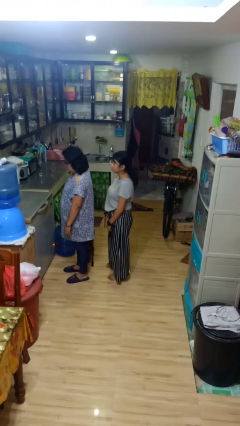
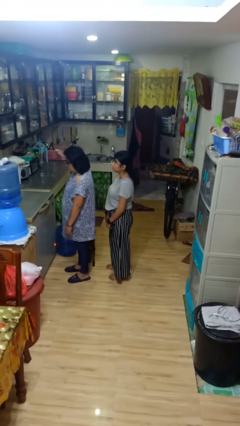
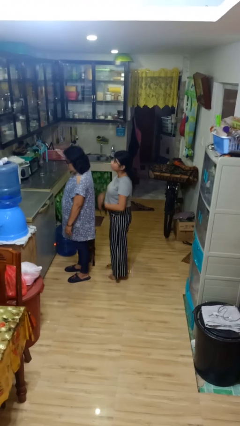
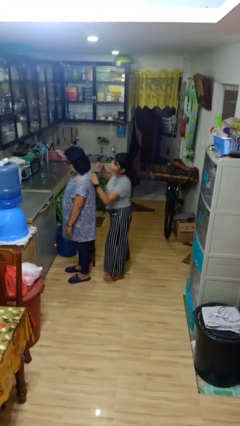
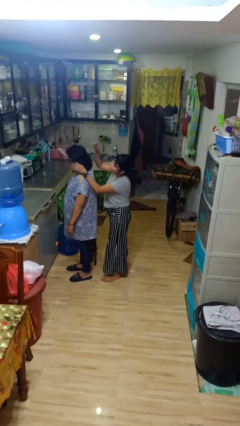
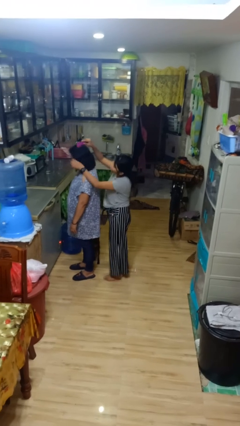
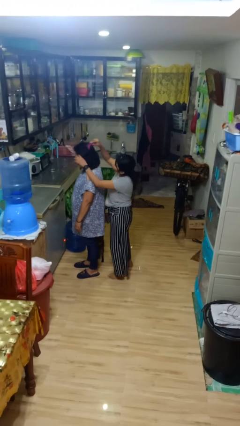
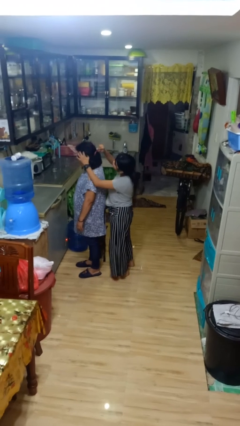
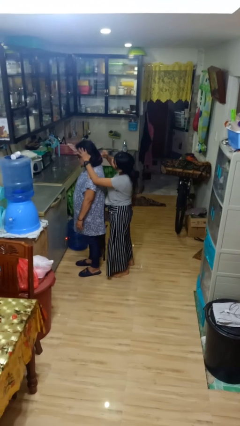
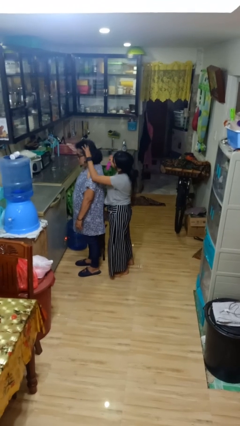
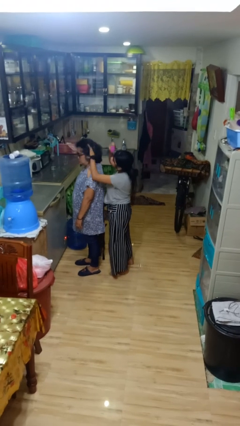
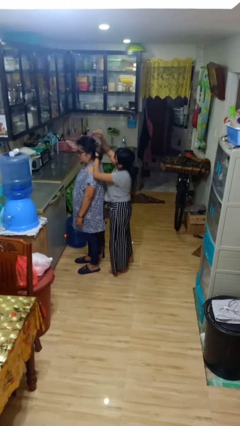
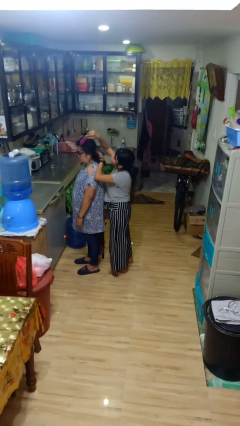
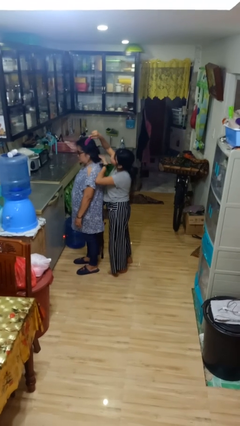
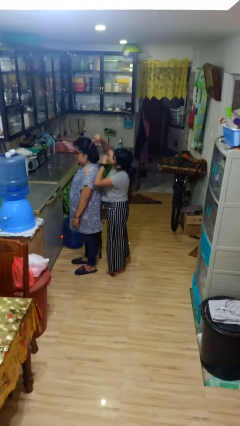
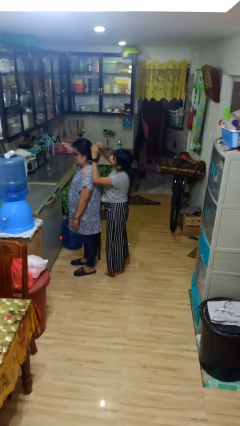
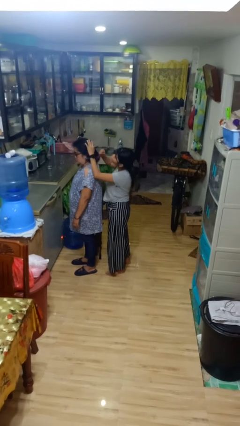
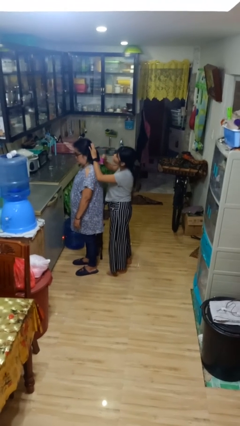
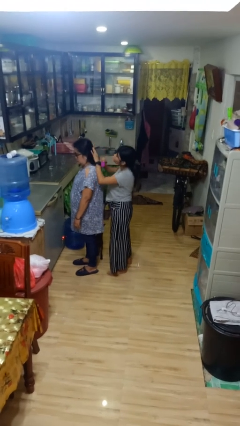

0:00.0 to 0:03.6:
person brushes hair of person

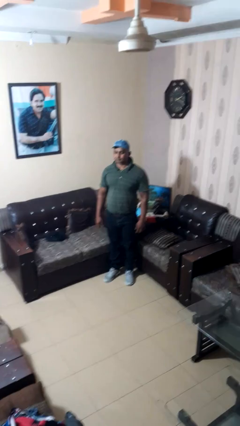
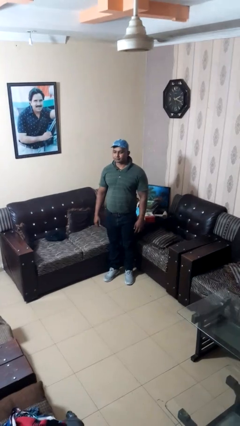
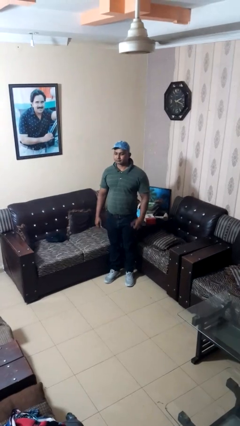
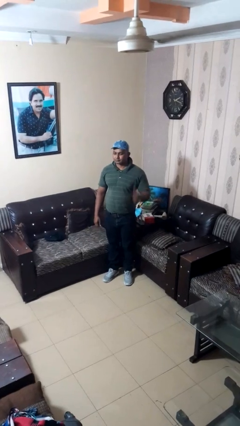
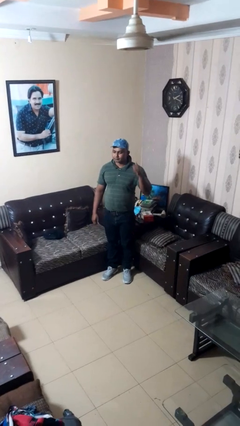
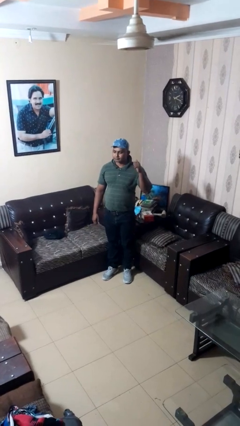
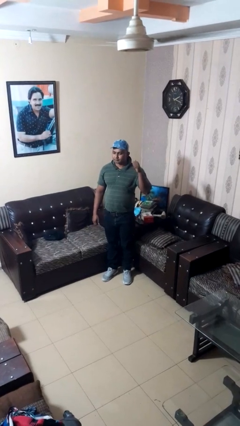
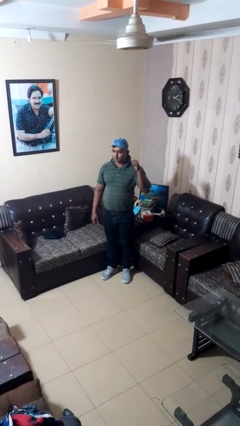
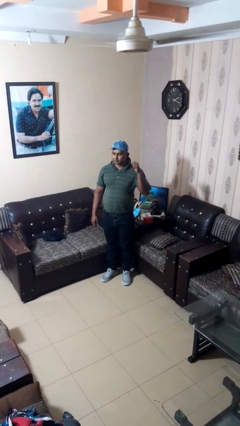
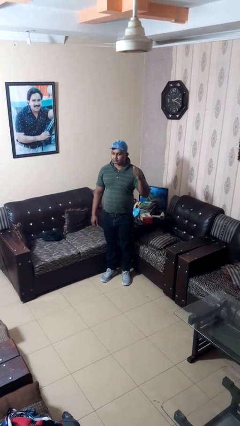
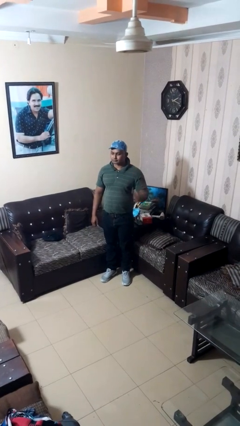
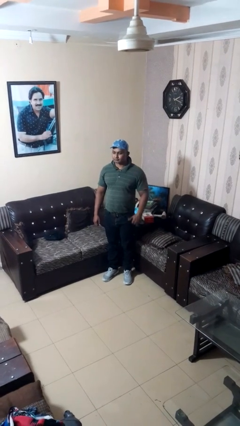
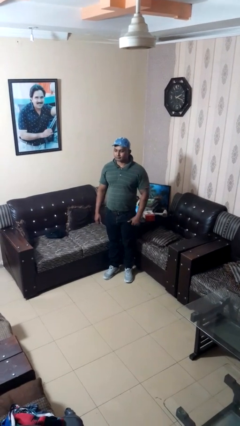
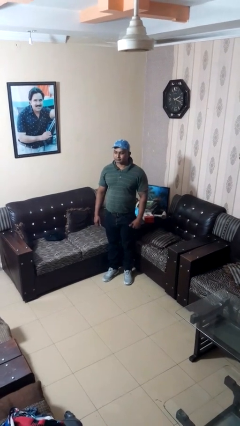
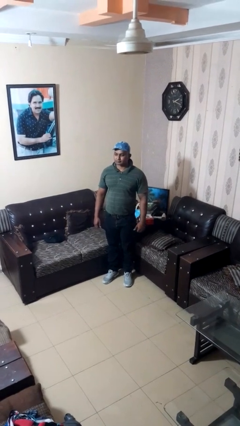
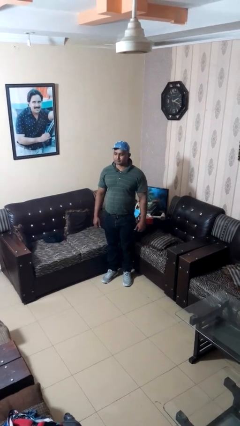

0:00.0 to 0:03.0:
person gestures behind me

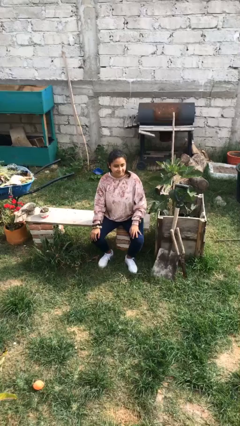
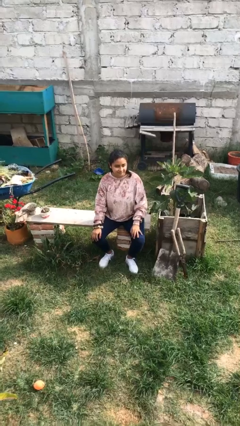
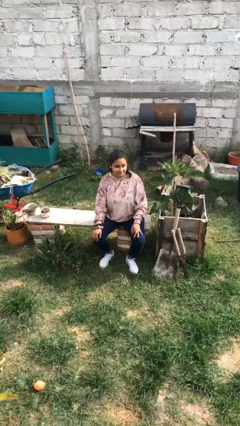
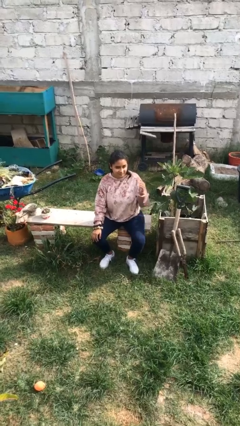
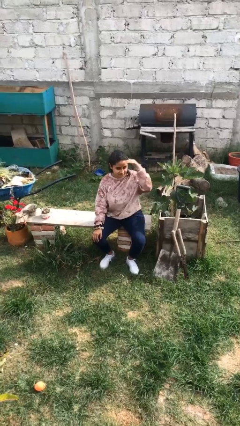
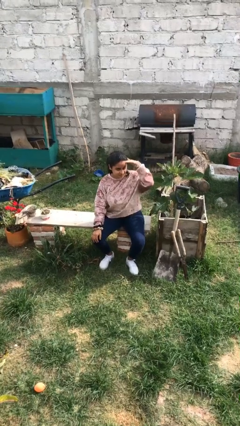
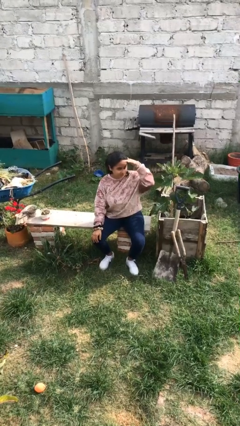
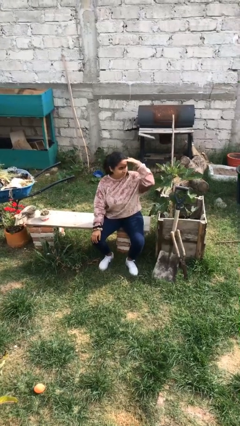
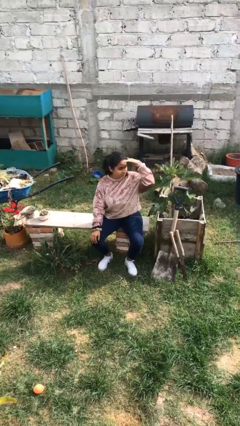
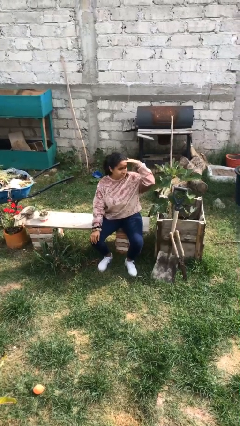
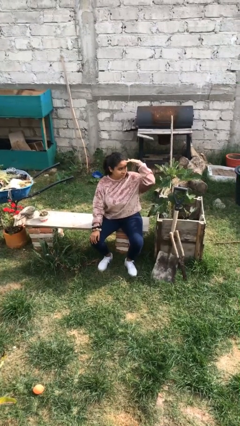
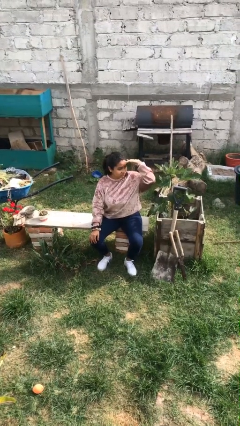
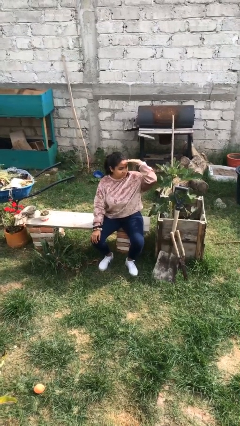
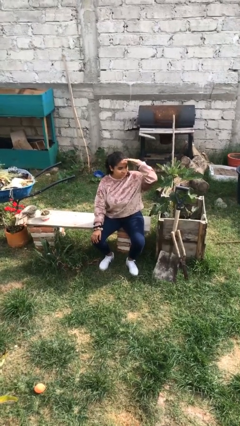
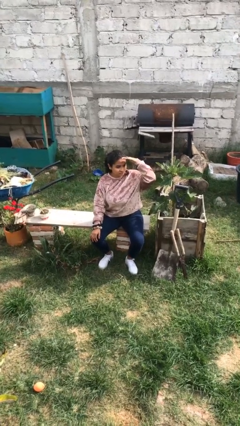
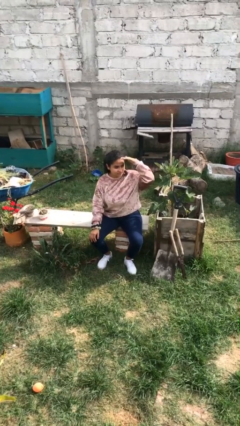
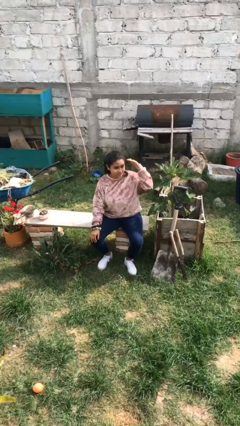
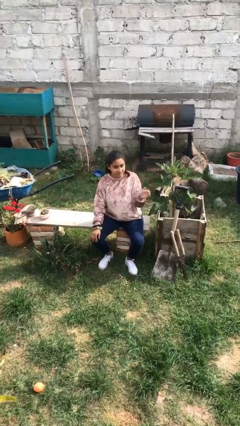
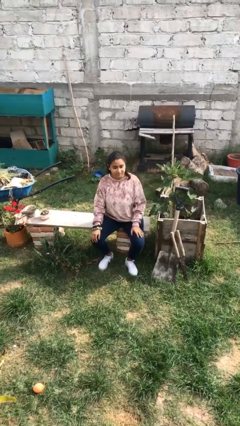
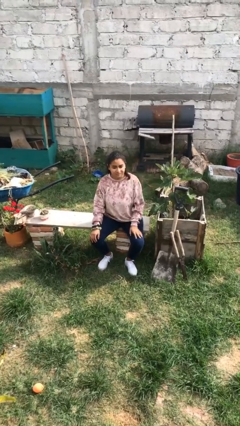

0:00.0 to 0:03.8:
person shades eyes

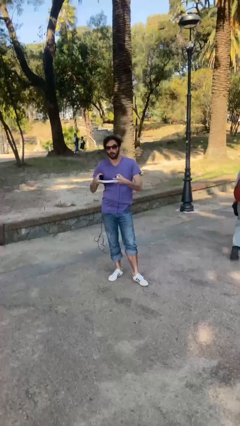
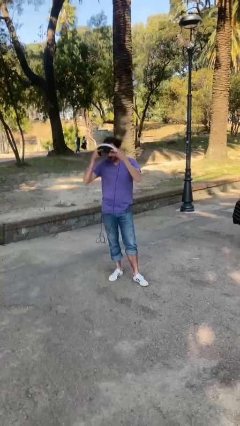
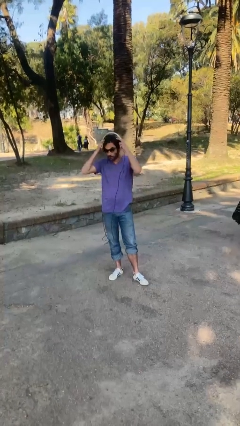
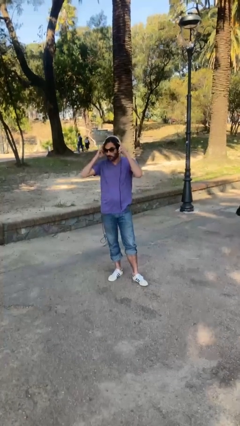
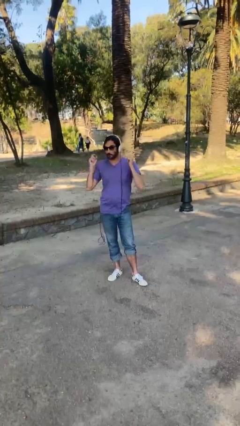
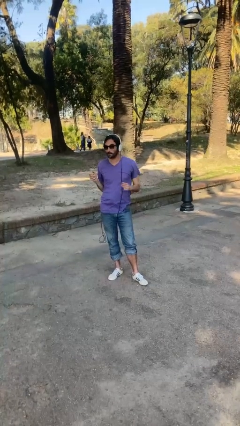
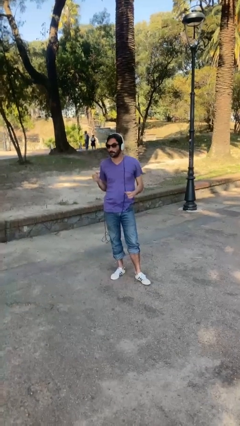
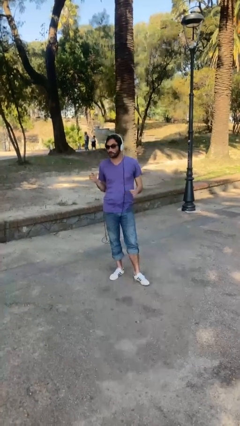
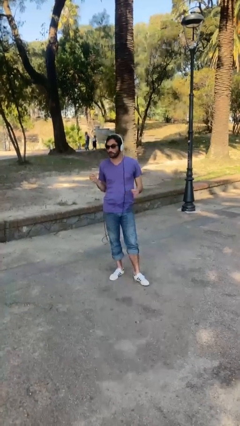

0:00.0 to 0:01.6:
person puts on headphones

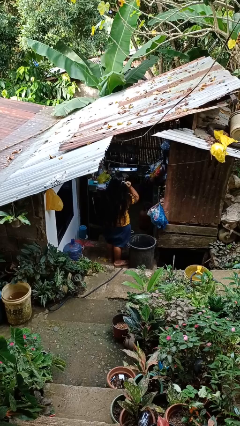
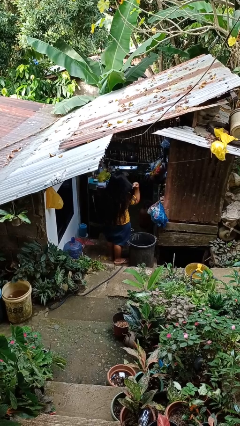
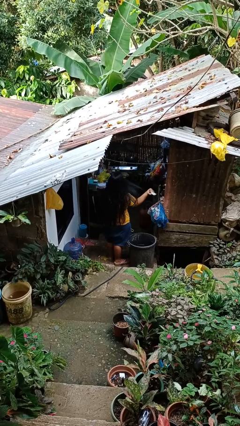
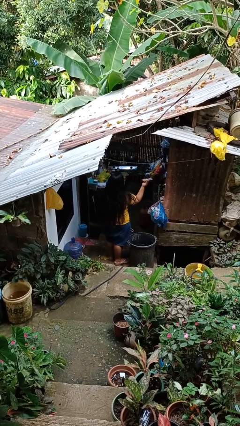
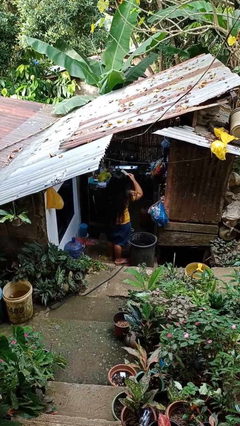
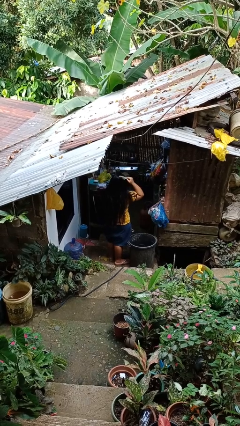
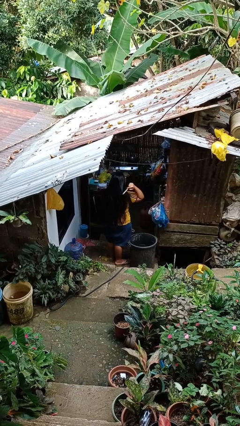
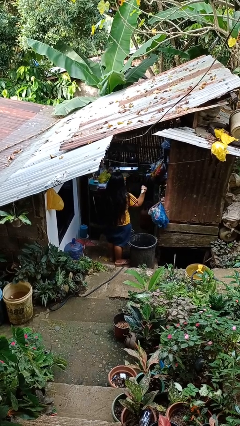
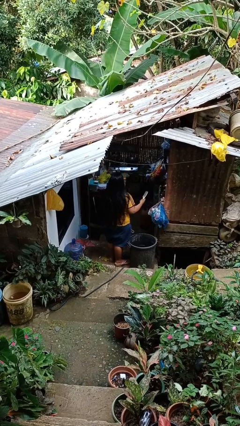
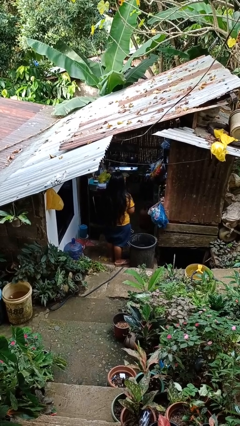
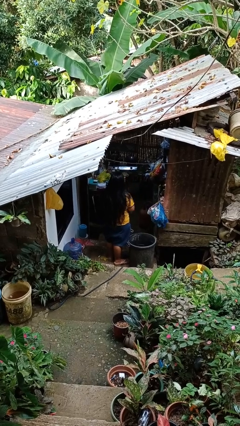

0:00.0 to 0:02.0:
person brushes hair

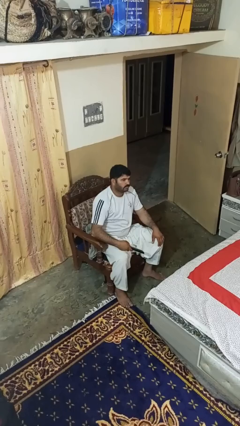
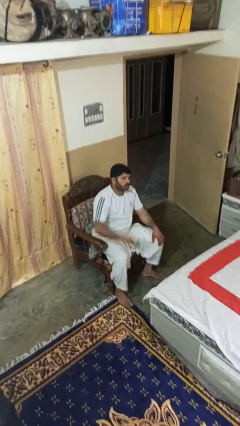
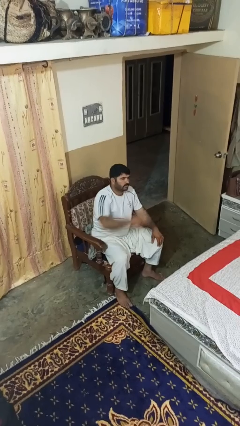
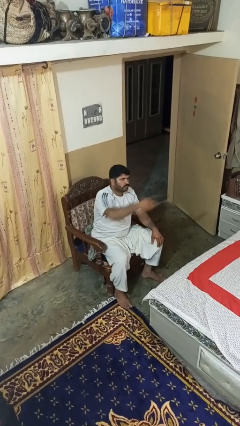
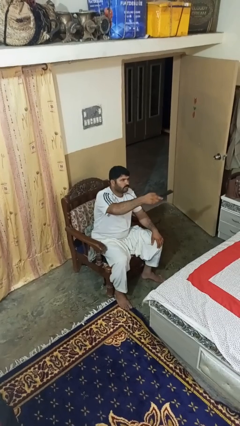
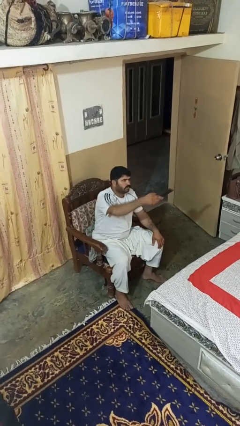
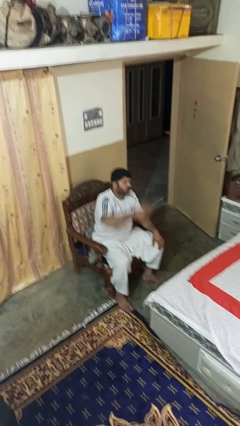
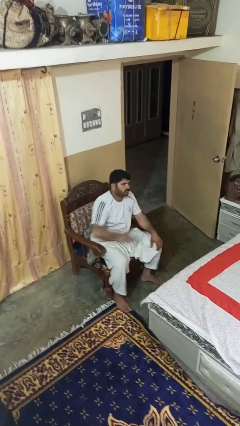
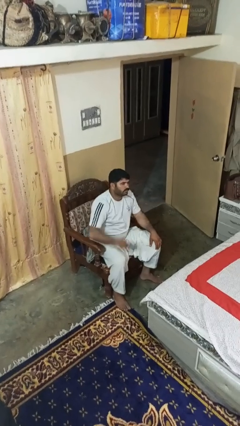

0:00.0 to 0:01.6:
person uses television remote

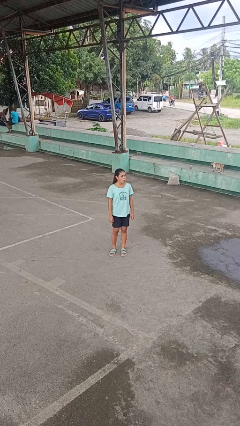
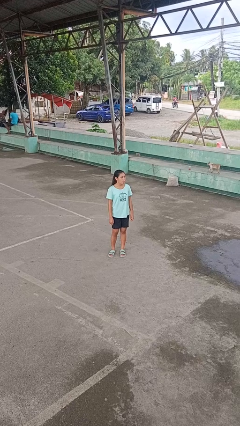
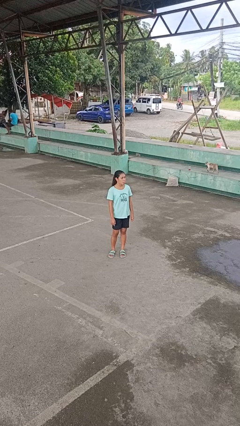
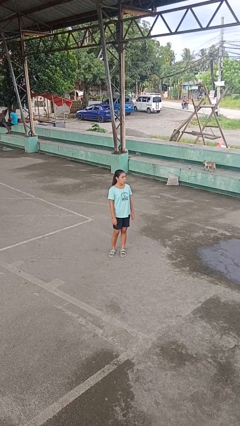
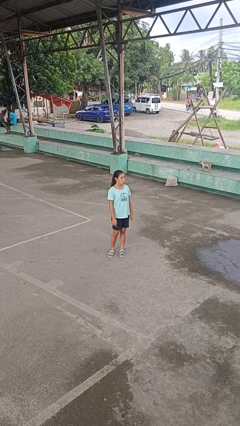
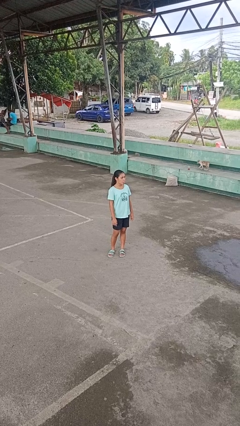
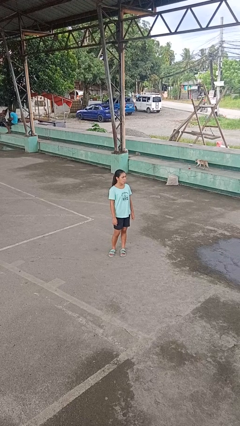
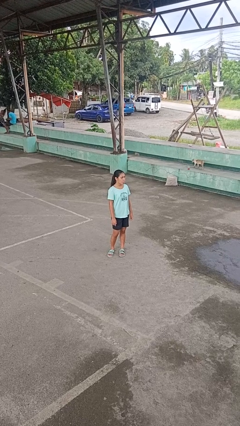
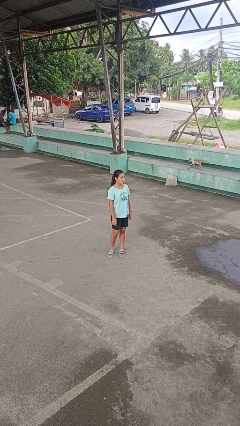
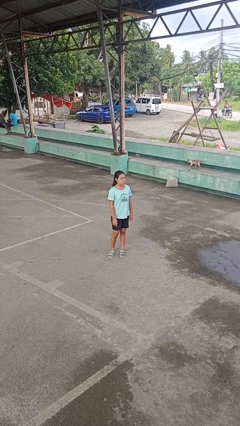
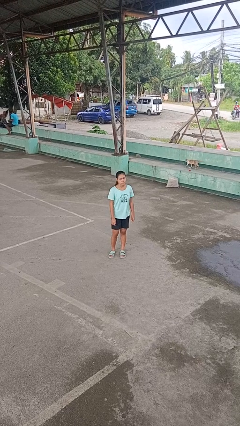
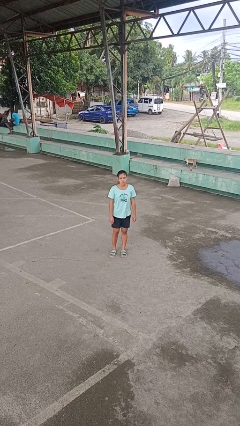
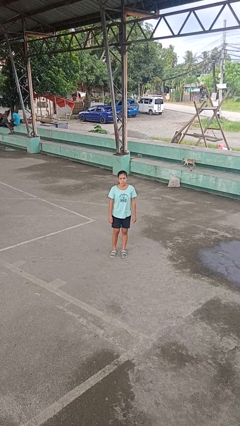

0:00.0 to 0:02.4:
person sticks out tongue
